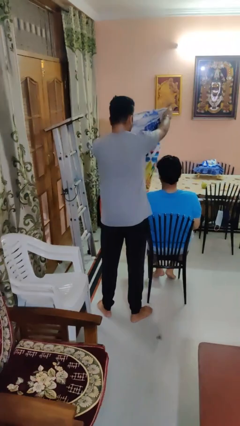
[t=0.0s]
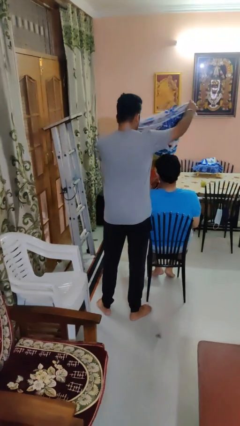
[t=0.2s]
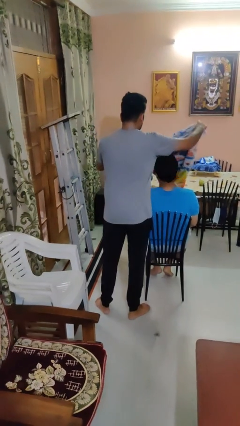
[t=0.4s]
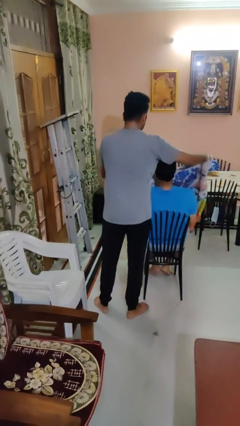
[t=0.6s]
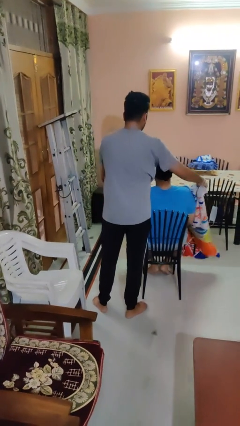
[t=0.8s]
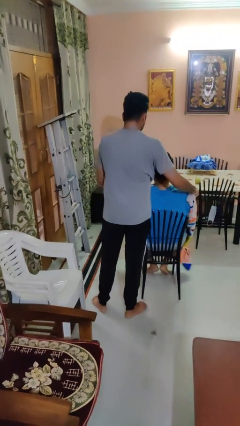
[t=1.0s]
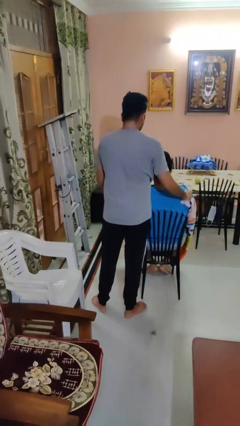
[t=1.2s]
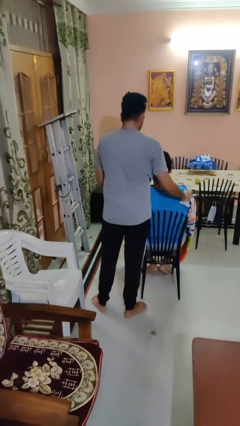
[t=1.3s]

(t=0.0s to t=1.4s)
person covers friend with blanket

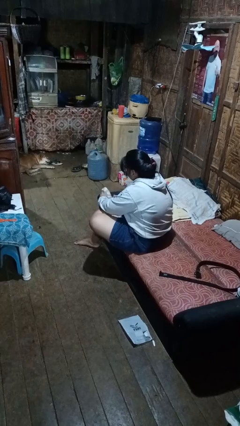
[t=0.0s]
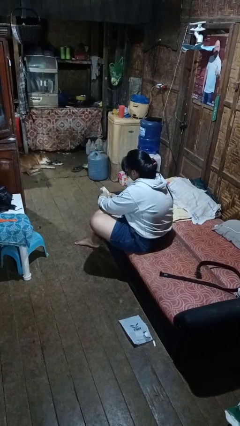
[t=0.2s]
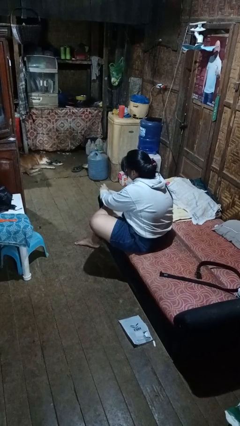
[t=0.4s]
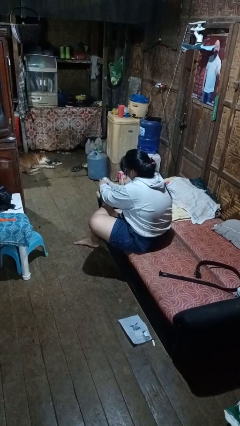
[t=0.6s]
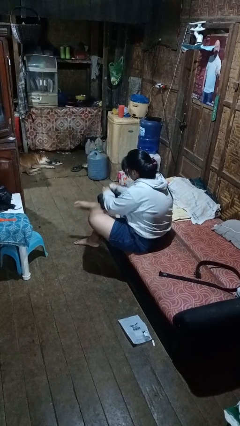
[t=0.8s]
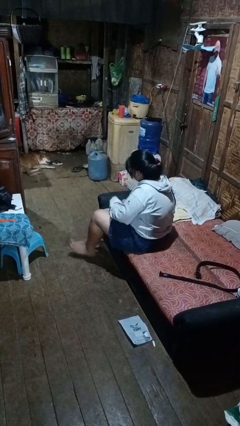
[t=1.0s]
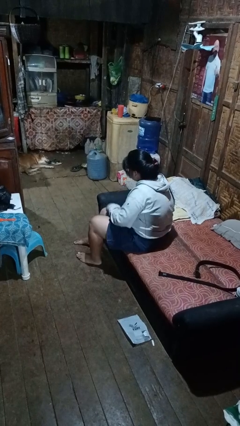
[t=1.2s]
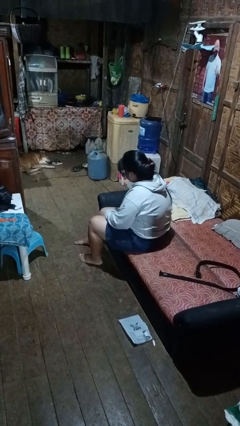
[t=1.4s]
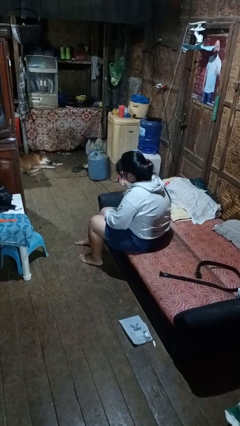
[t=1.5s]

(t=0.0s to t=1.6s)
person takes off socks

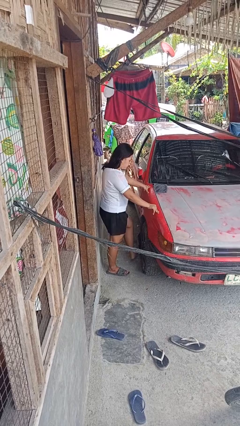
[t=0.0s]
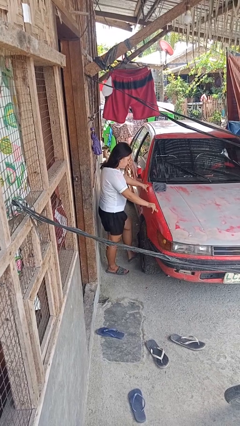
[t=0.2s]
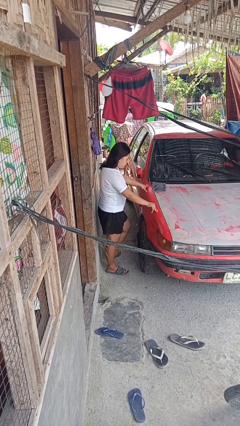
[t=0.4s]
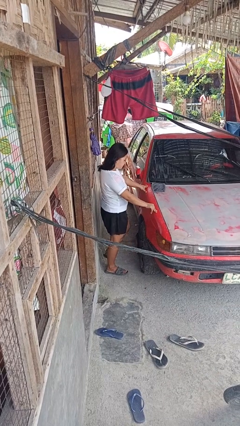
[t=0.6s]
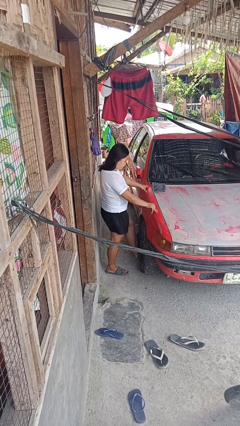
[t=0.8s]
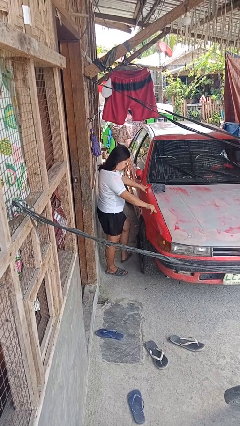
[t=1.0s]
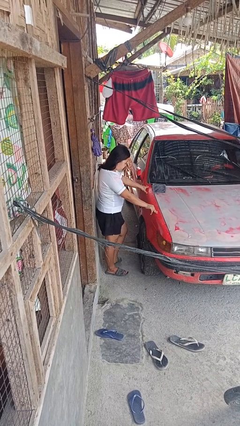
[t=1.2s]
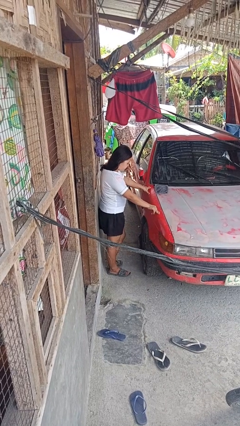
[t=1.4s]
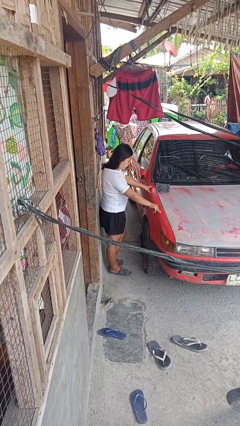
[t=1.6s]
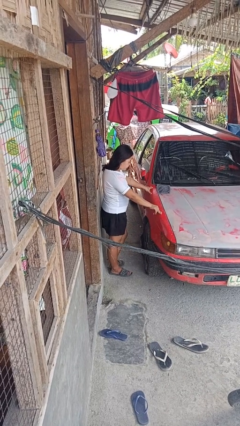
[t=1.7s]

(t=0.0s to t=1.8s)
person kicks car tires

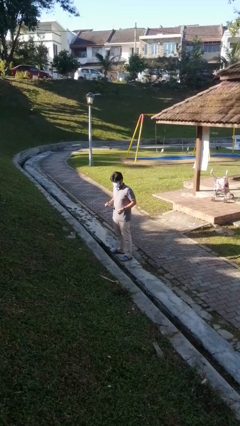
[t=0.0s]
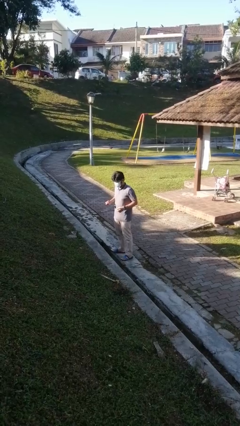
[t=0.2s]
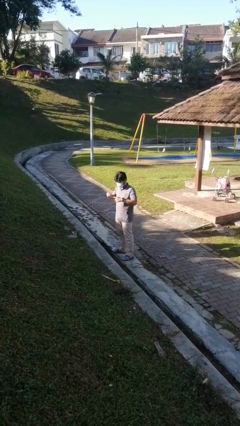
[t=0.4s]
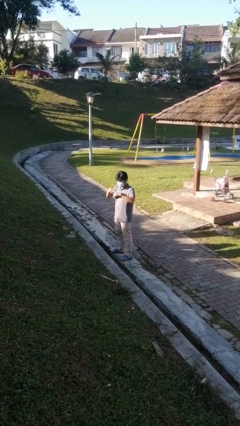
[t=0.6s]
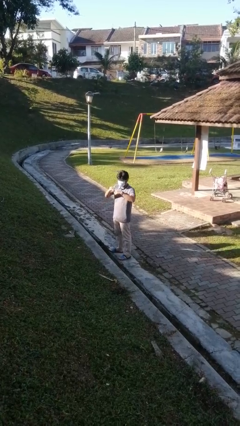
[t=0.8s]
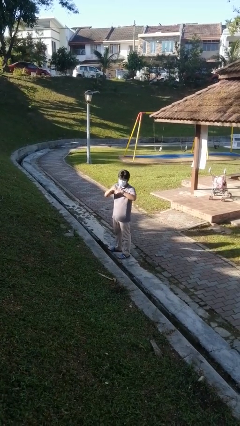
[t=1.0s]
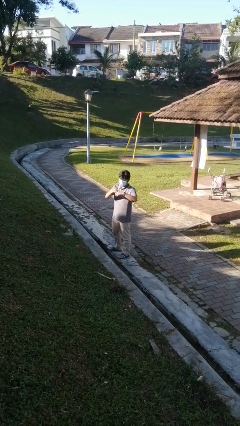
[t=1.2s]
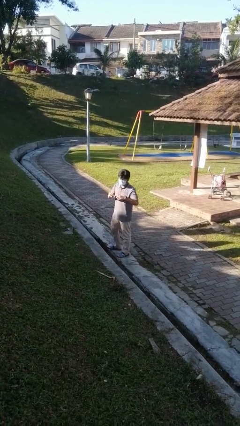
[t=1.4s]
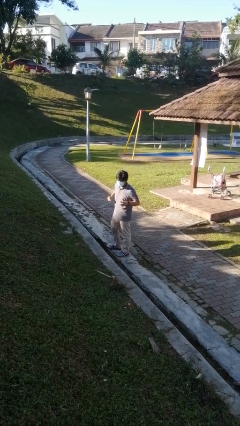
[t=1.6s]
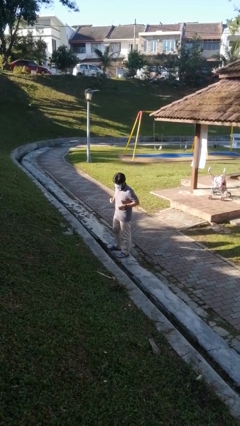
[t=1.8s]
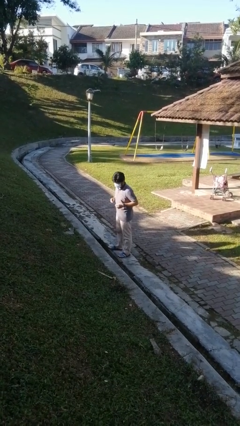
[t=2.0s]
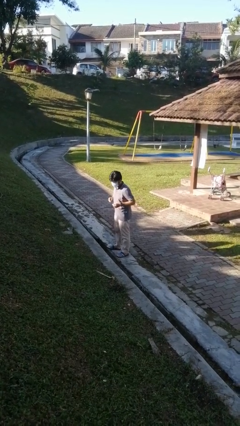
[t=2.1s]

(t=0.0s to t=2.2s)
person puts on ring

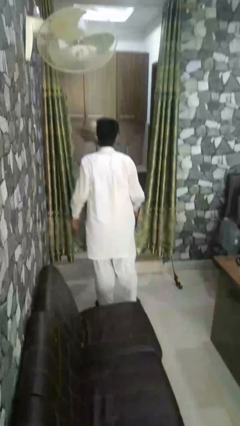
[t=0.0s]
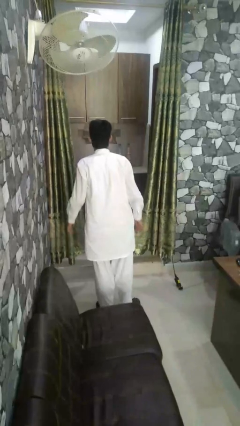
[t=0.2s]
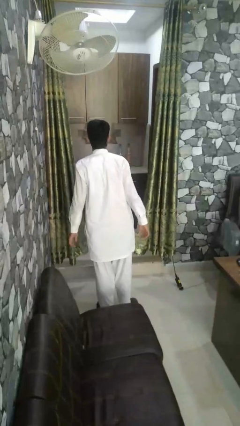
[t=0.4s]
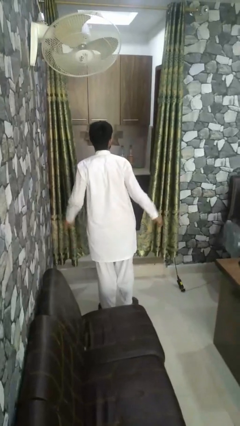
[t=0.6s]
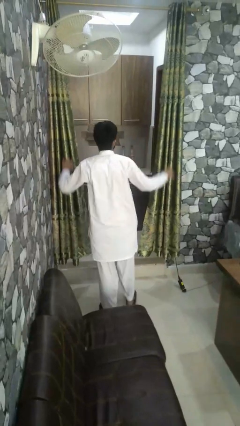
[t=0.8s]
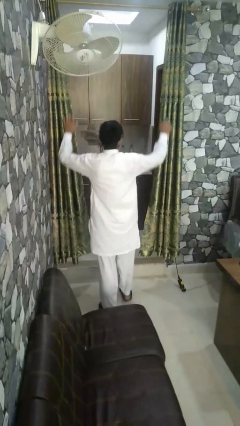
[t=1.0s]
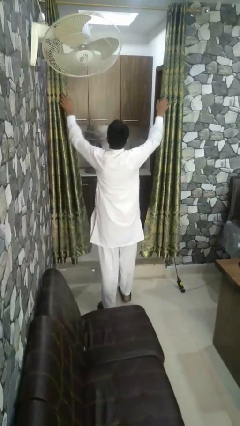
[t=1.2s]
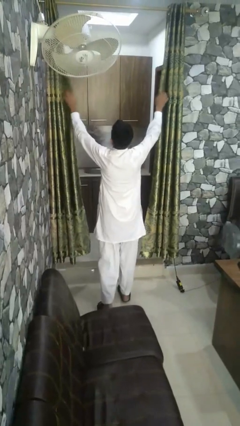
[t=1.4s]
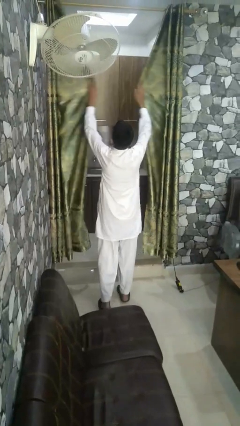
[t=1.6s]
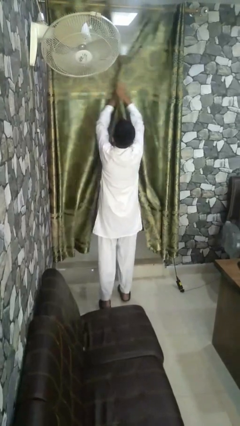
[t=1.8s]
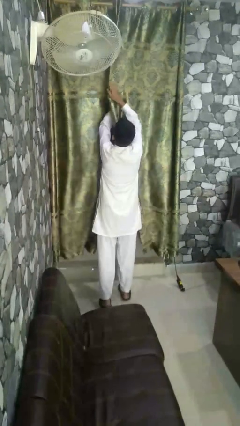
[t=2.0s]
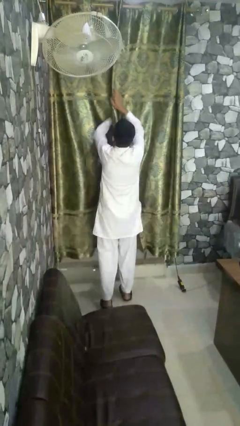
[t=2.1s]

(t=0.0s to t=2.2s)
person closes curtains

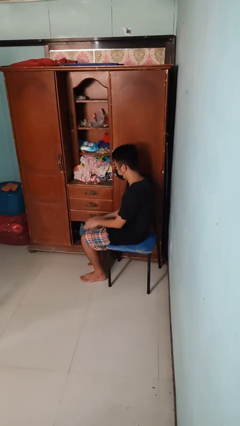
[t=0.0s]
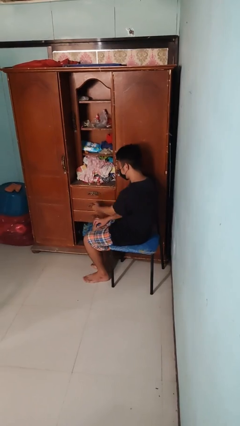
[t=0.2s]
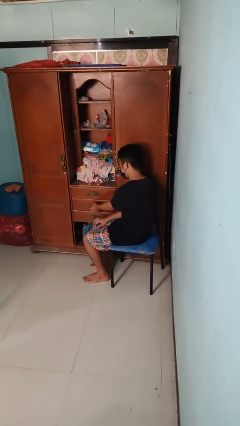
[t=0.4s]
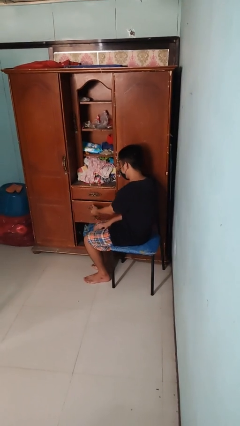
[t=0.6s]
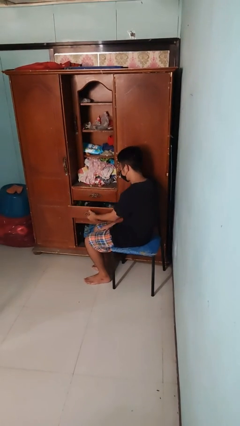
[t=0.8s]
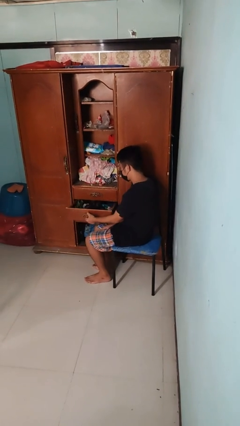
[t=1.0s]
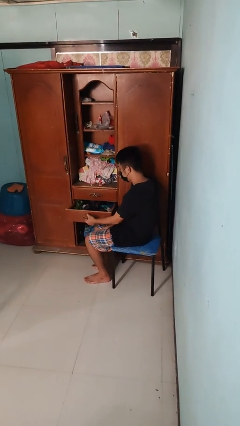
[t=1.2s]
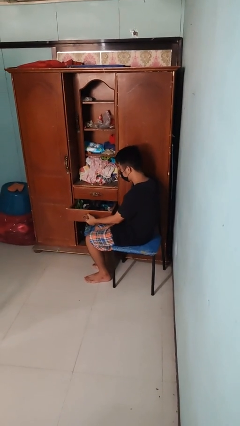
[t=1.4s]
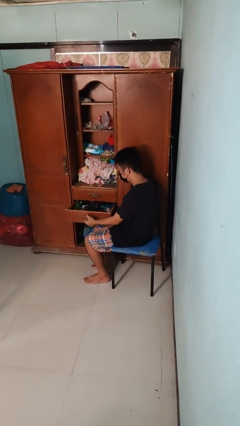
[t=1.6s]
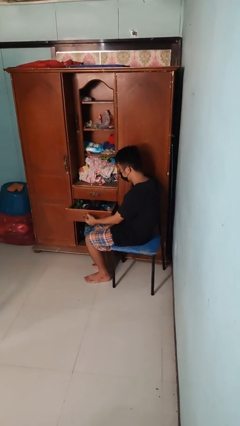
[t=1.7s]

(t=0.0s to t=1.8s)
person opens dresser drawer

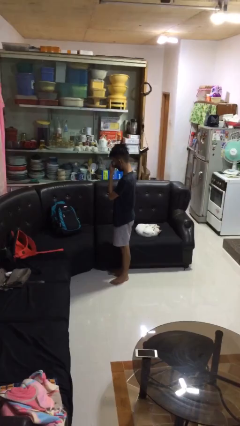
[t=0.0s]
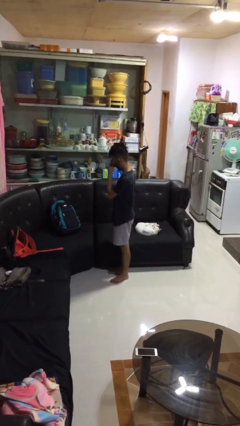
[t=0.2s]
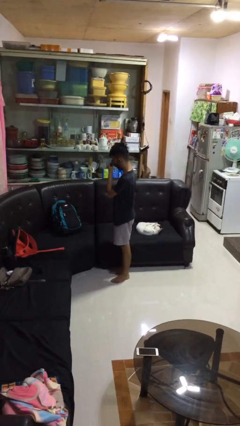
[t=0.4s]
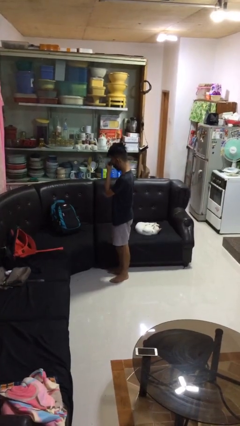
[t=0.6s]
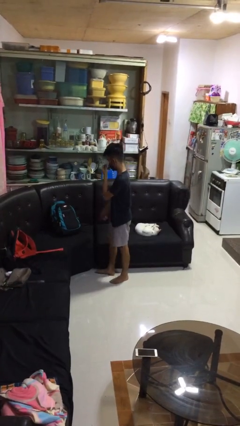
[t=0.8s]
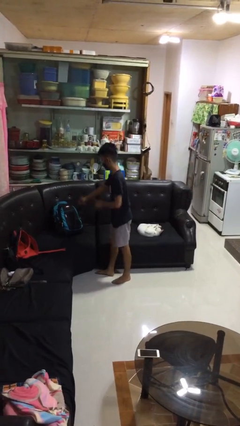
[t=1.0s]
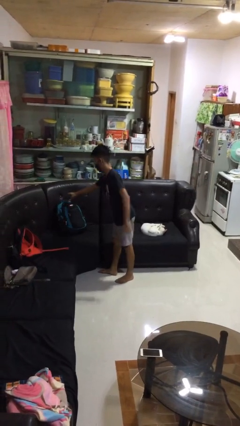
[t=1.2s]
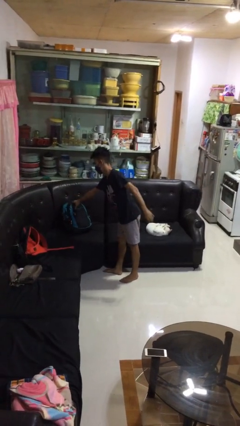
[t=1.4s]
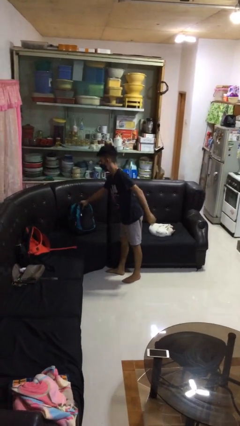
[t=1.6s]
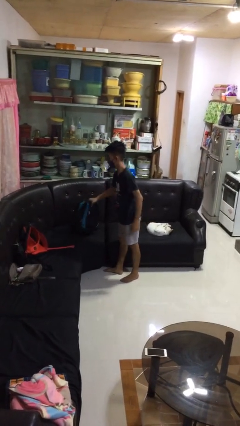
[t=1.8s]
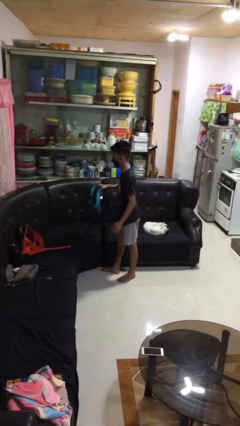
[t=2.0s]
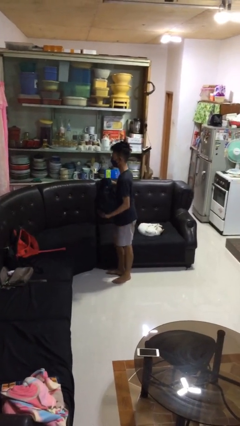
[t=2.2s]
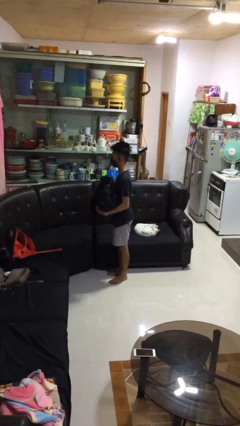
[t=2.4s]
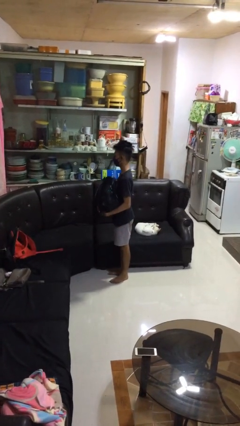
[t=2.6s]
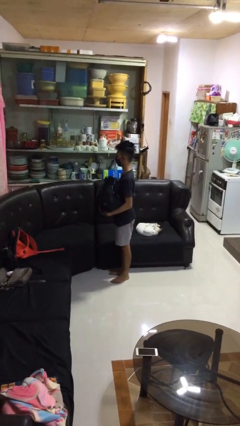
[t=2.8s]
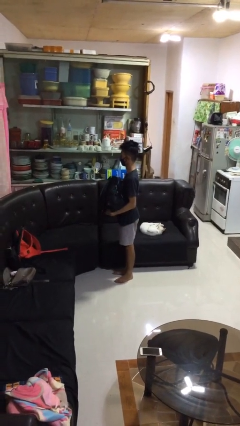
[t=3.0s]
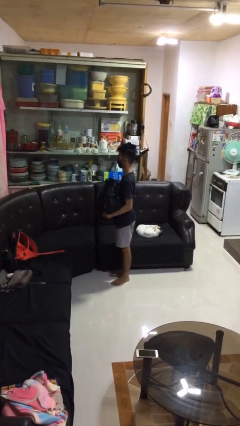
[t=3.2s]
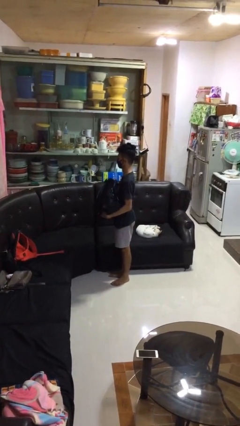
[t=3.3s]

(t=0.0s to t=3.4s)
person picks up object from couch

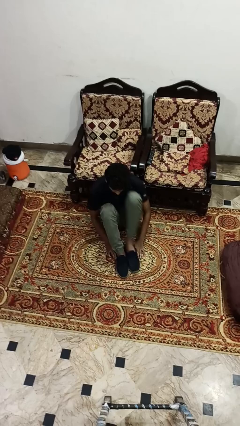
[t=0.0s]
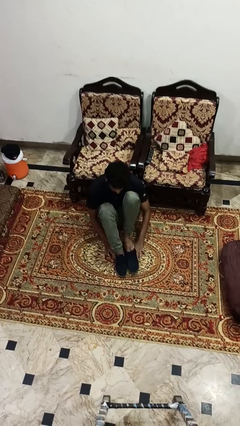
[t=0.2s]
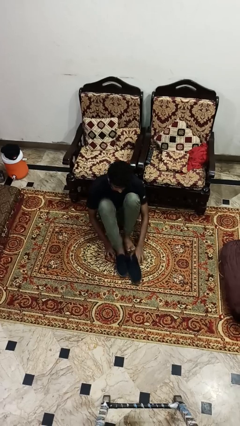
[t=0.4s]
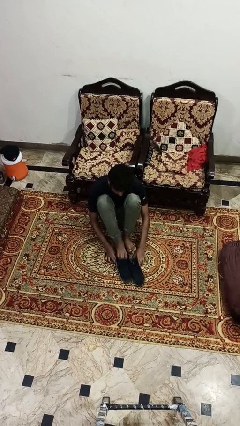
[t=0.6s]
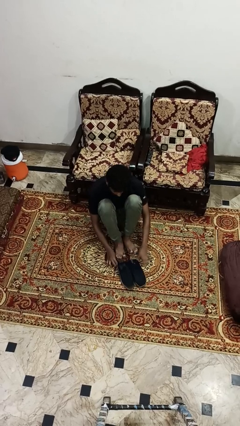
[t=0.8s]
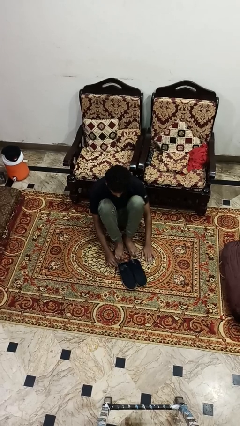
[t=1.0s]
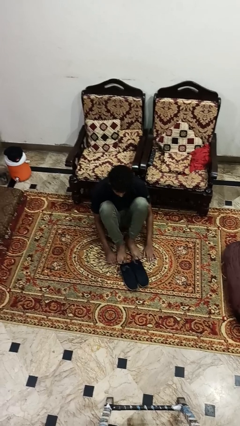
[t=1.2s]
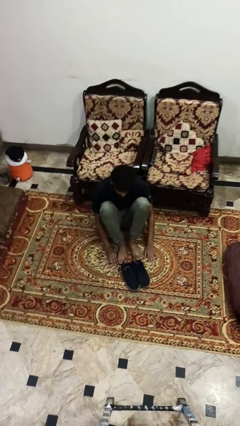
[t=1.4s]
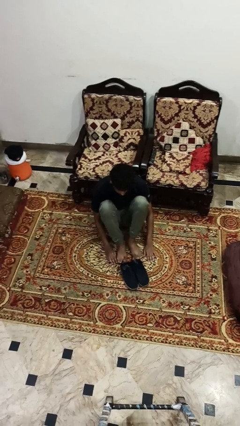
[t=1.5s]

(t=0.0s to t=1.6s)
person takes off shoes

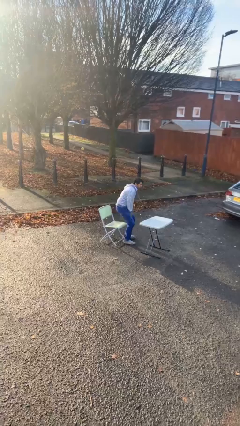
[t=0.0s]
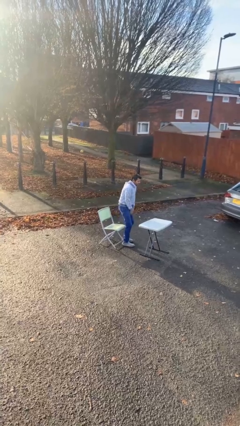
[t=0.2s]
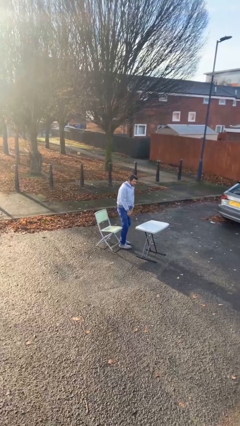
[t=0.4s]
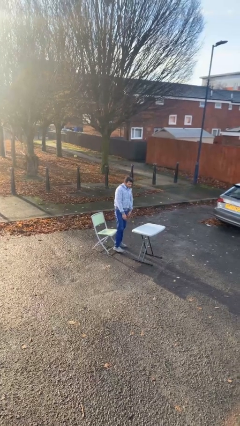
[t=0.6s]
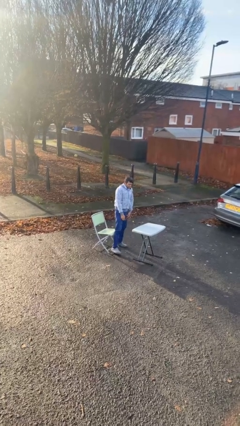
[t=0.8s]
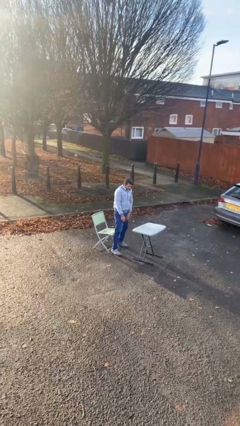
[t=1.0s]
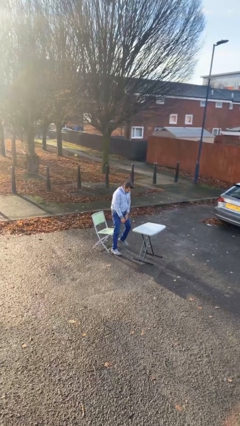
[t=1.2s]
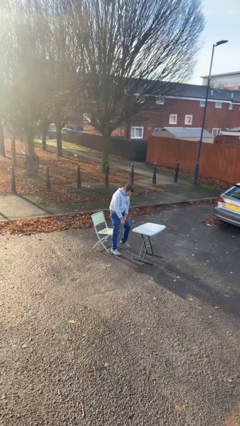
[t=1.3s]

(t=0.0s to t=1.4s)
person stands up
